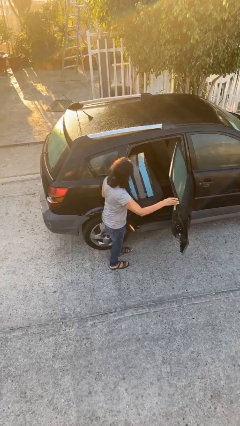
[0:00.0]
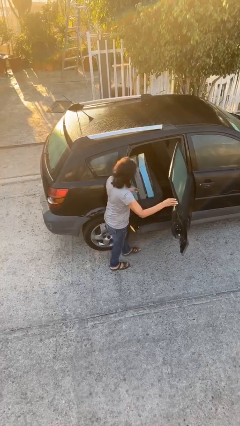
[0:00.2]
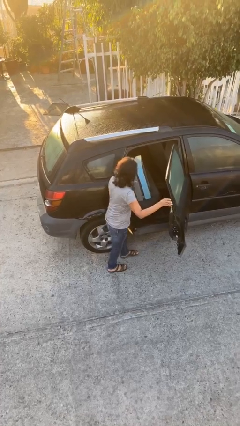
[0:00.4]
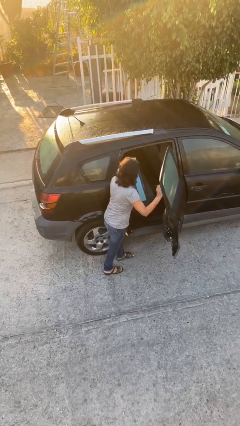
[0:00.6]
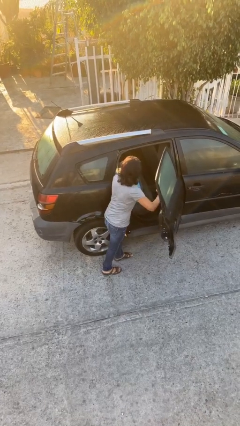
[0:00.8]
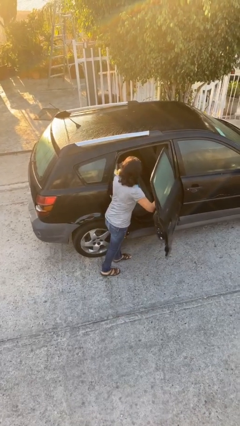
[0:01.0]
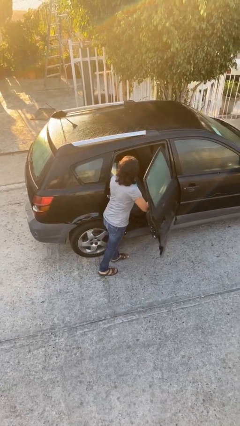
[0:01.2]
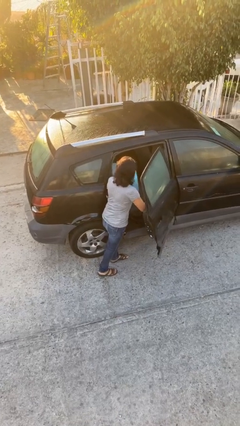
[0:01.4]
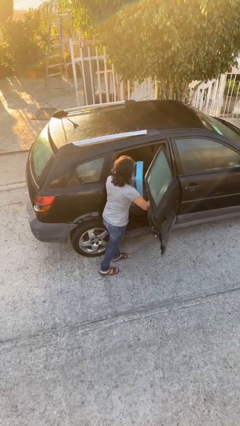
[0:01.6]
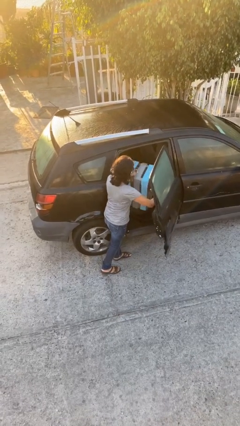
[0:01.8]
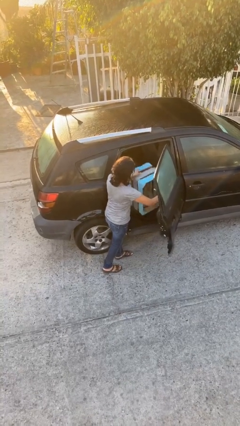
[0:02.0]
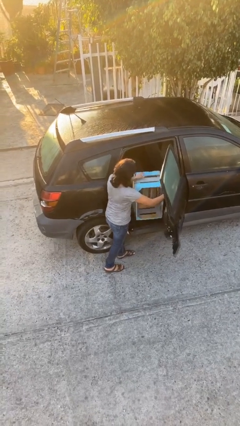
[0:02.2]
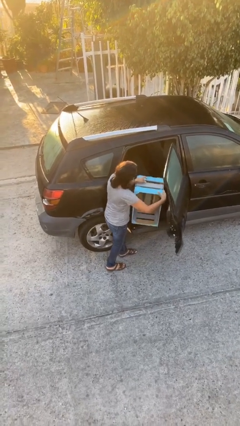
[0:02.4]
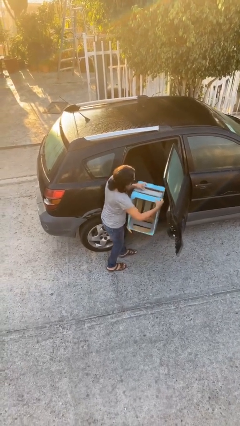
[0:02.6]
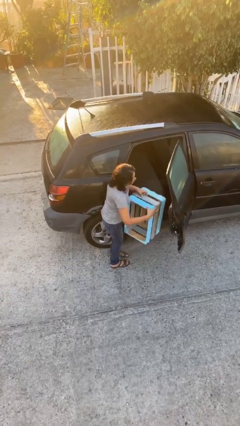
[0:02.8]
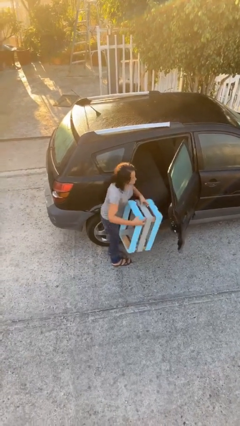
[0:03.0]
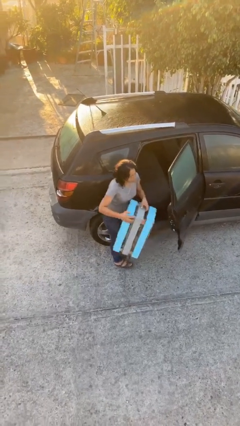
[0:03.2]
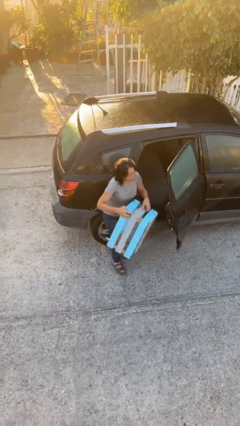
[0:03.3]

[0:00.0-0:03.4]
person unloads car

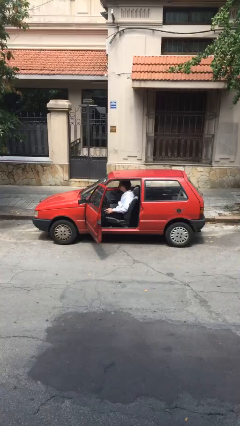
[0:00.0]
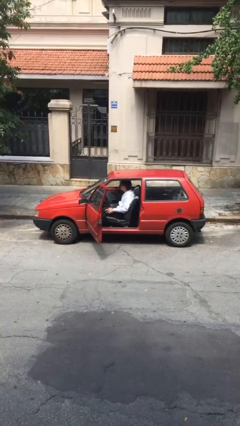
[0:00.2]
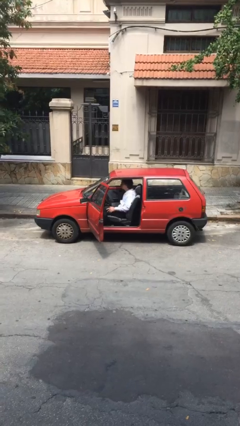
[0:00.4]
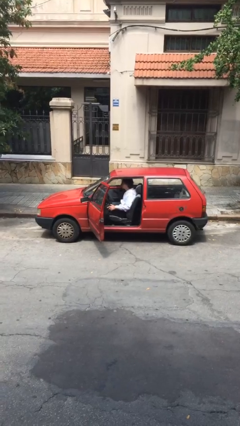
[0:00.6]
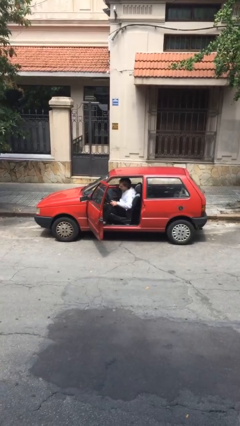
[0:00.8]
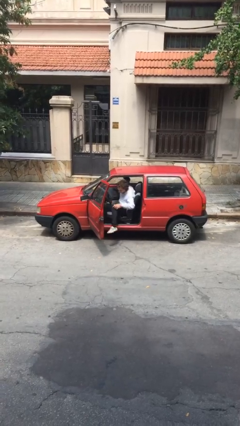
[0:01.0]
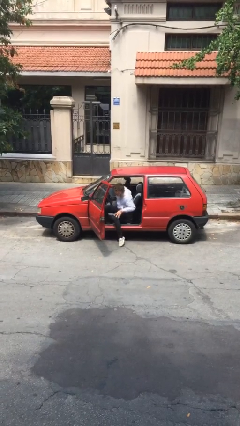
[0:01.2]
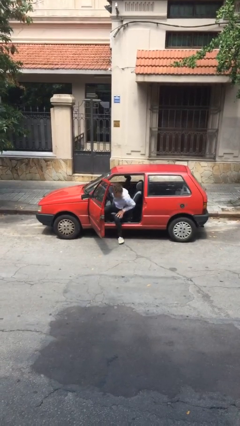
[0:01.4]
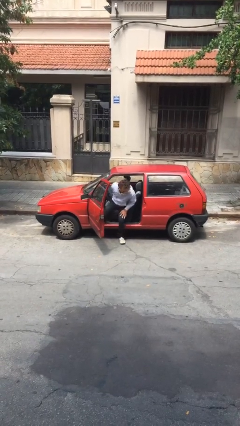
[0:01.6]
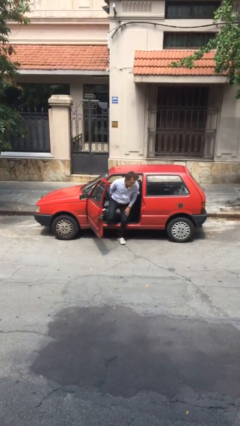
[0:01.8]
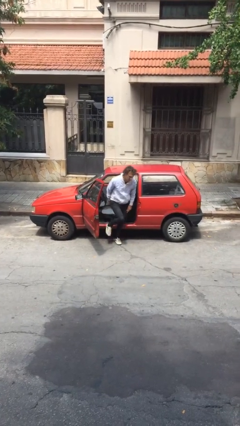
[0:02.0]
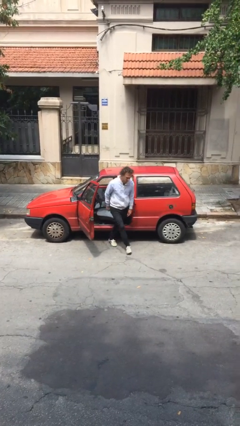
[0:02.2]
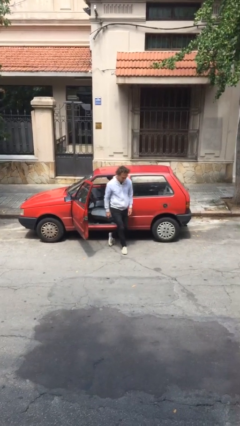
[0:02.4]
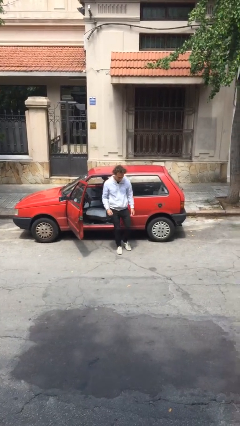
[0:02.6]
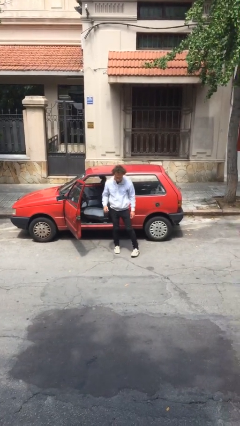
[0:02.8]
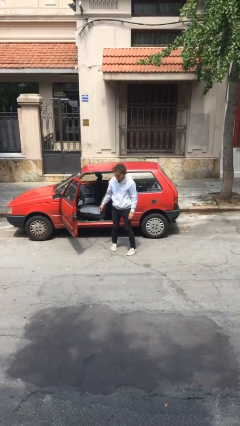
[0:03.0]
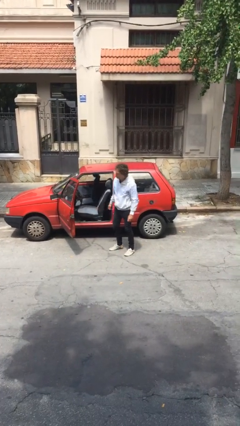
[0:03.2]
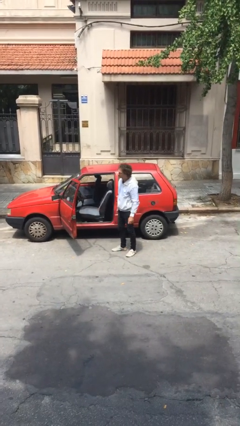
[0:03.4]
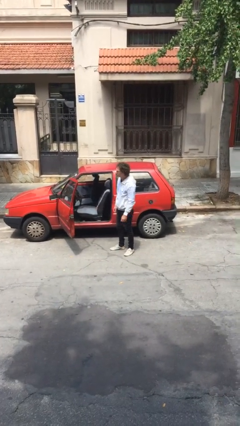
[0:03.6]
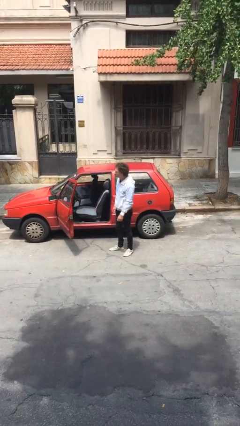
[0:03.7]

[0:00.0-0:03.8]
person exits car

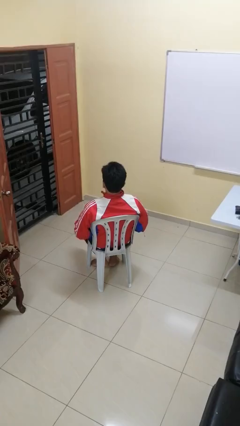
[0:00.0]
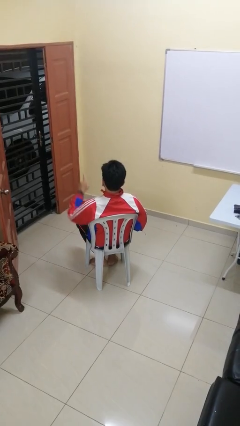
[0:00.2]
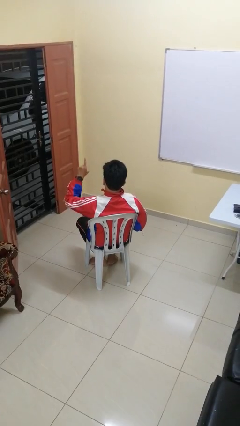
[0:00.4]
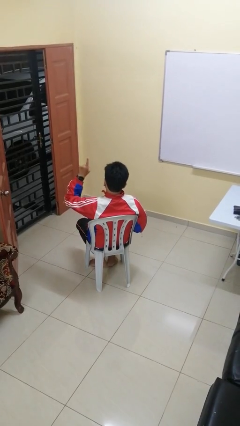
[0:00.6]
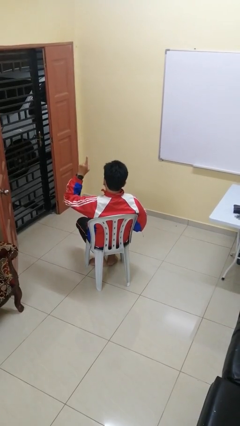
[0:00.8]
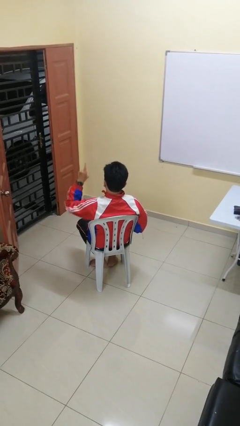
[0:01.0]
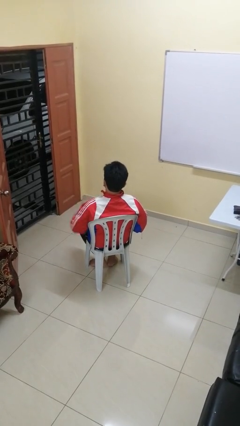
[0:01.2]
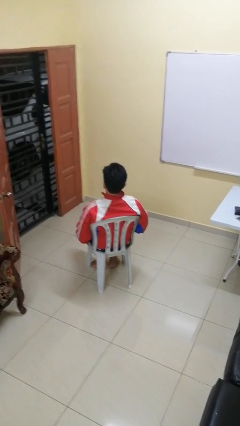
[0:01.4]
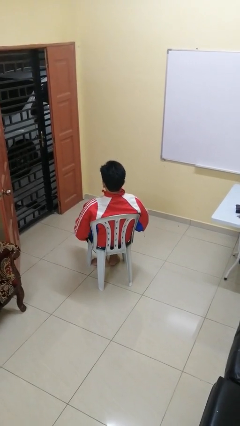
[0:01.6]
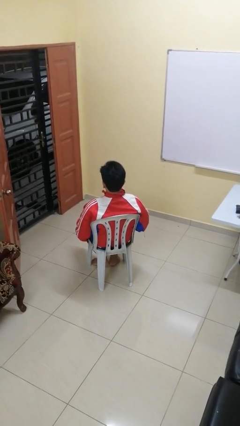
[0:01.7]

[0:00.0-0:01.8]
person gestures number one

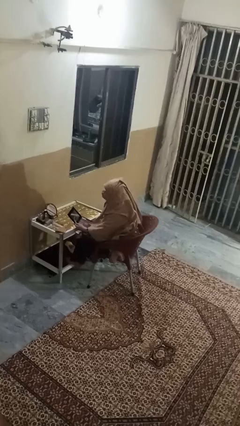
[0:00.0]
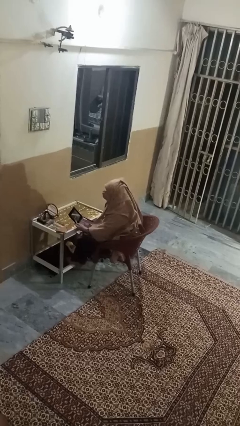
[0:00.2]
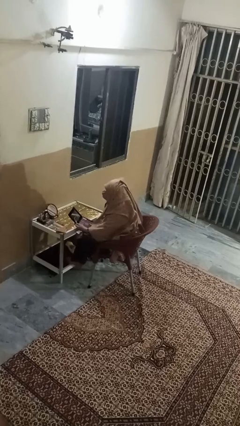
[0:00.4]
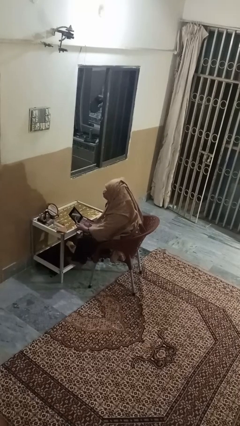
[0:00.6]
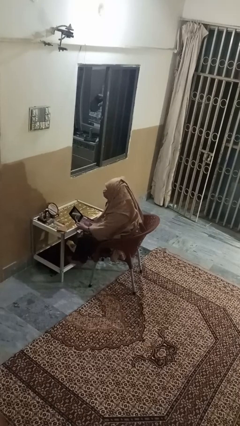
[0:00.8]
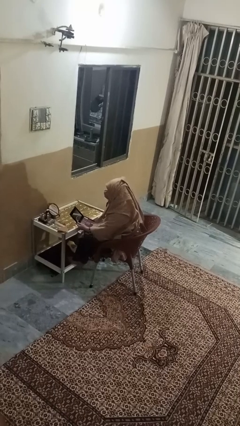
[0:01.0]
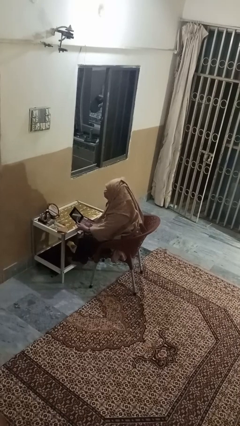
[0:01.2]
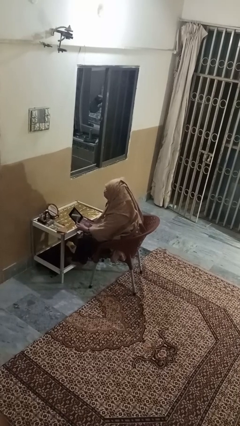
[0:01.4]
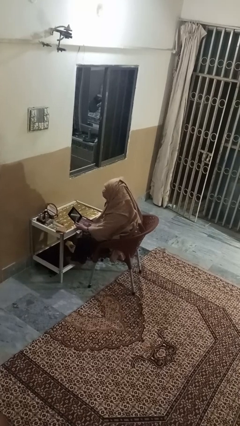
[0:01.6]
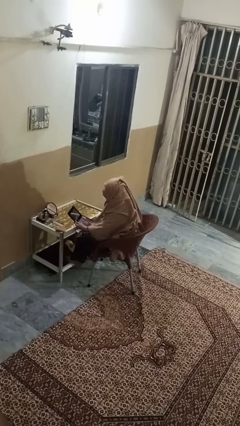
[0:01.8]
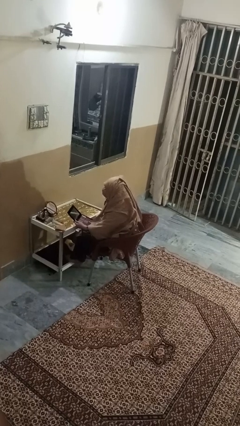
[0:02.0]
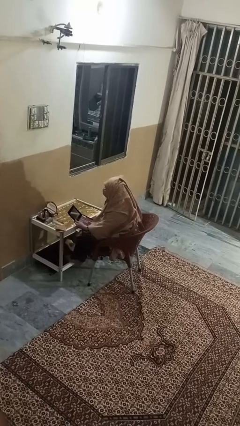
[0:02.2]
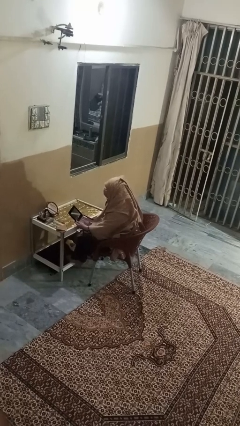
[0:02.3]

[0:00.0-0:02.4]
person applies eye makeup

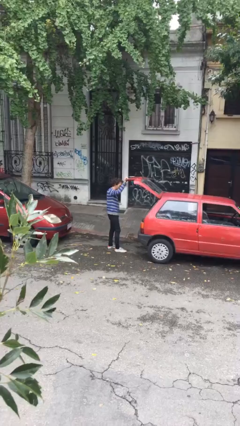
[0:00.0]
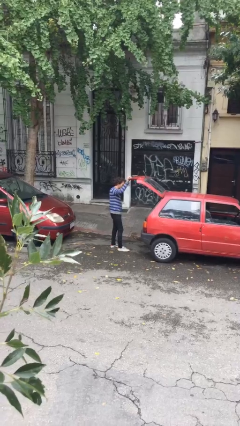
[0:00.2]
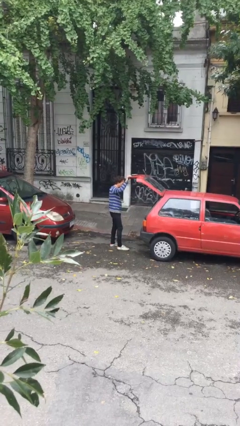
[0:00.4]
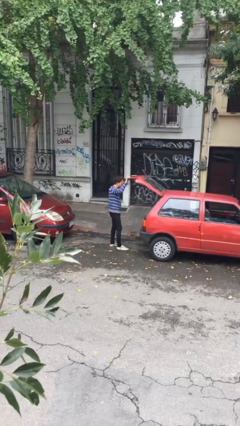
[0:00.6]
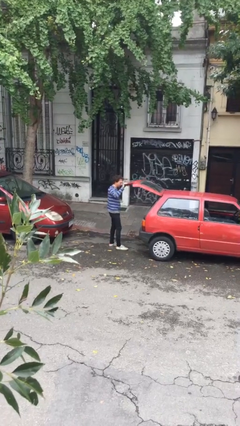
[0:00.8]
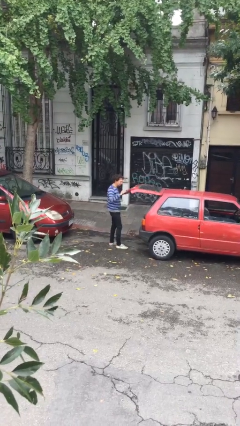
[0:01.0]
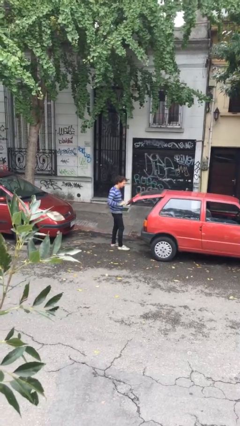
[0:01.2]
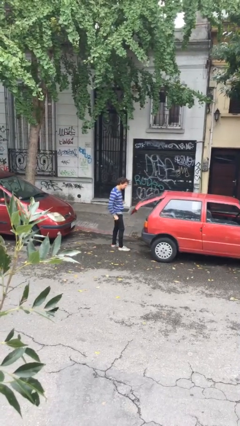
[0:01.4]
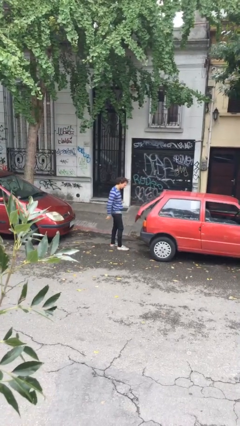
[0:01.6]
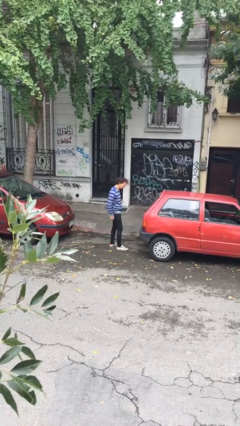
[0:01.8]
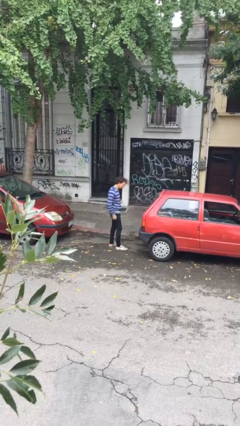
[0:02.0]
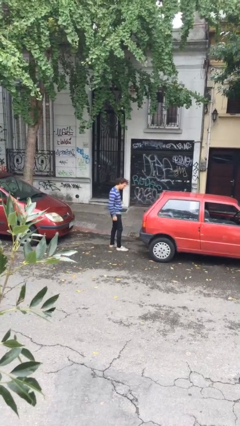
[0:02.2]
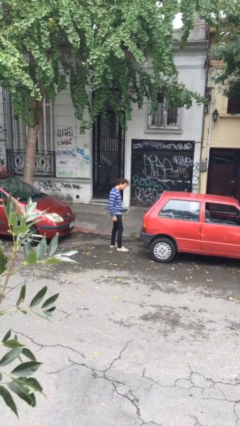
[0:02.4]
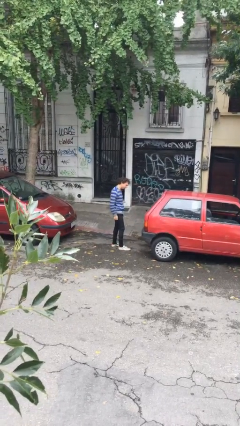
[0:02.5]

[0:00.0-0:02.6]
person closes car trunk

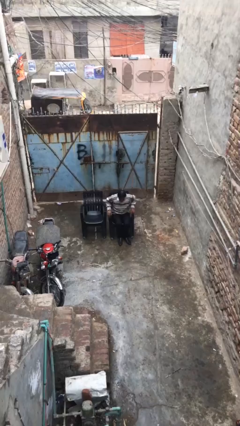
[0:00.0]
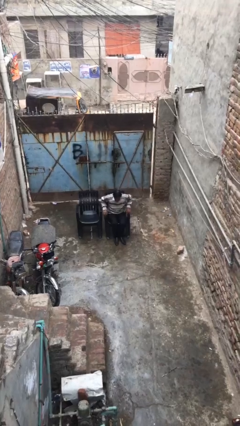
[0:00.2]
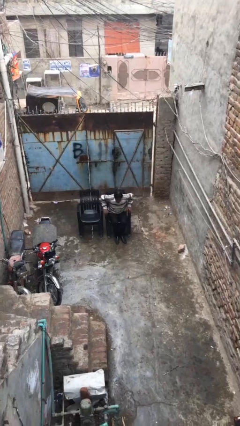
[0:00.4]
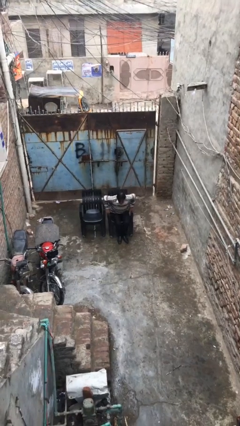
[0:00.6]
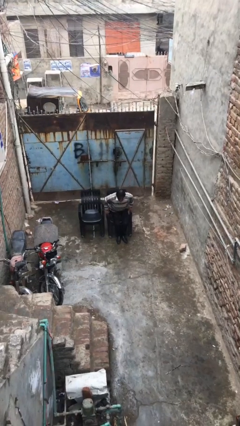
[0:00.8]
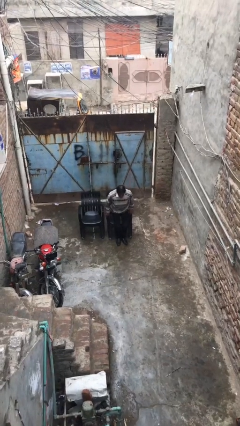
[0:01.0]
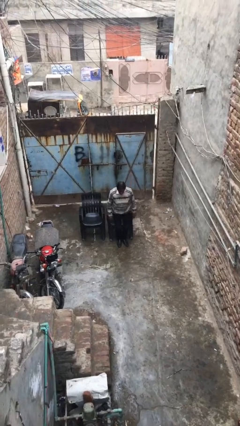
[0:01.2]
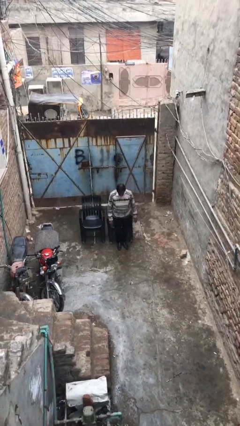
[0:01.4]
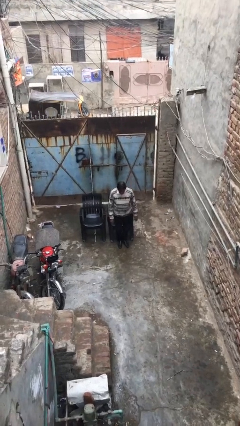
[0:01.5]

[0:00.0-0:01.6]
person stands up

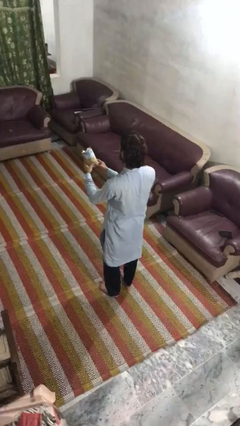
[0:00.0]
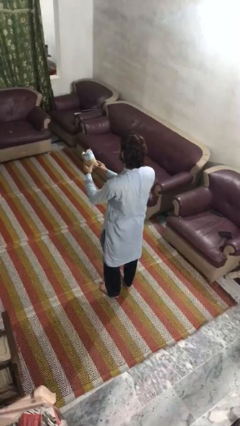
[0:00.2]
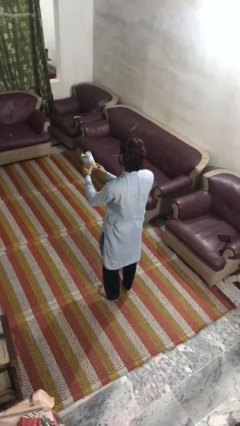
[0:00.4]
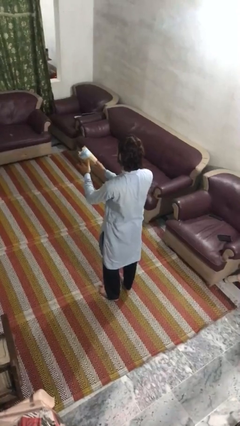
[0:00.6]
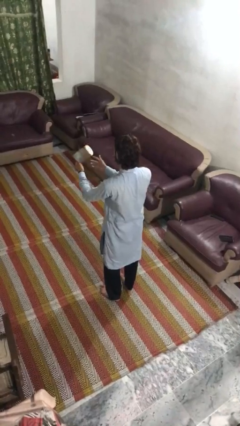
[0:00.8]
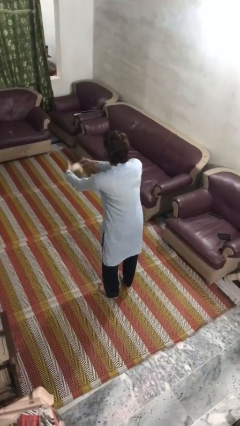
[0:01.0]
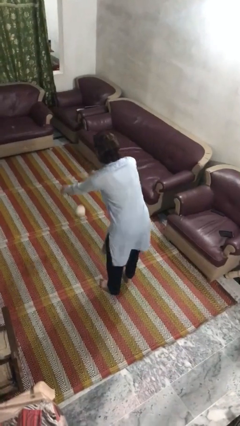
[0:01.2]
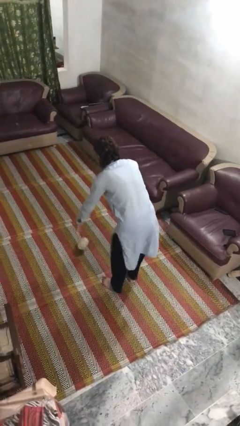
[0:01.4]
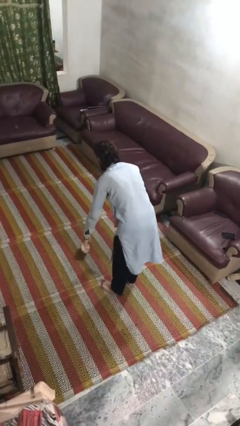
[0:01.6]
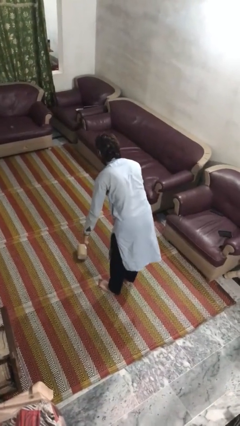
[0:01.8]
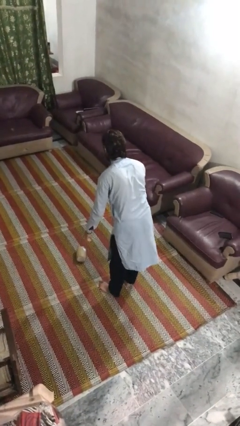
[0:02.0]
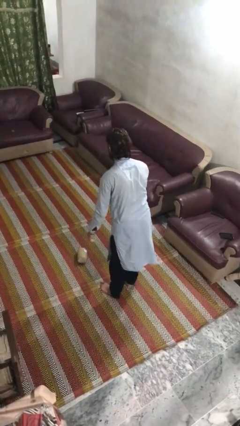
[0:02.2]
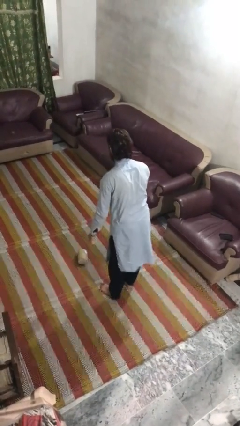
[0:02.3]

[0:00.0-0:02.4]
person drops object
